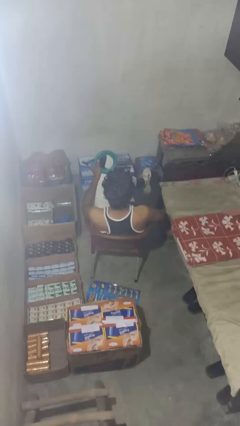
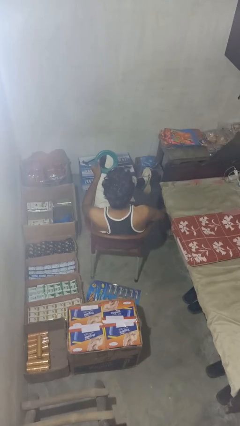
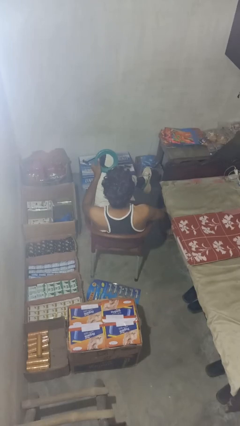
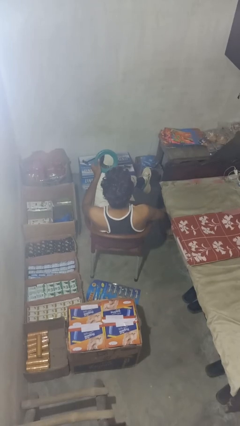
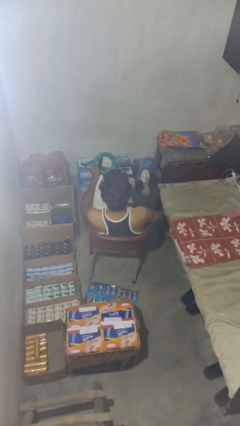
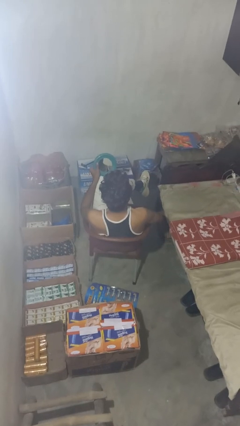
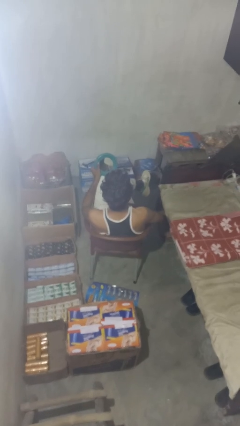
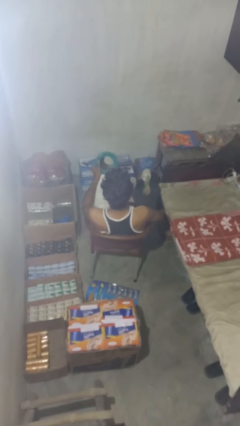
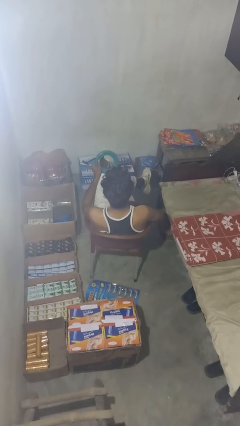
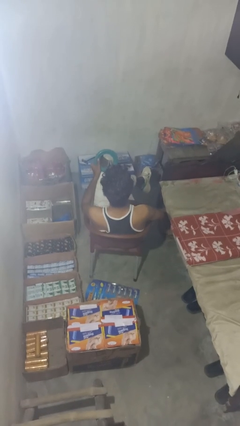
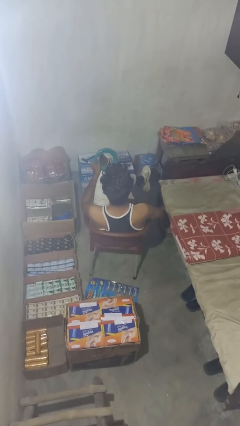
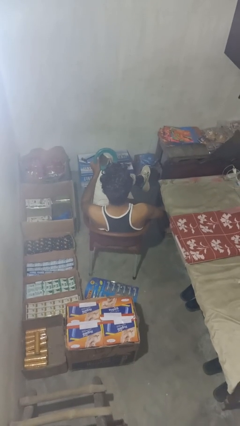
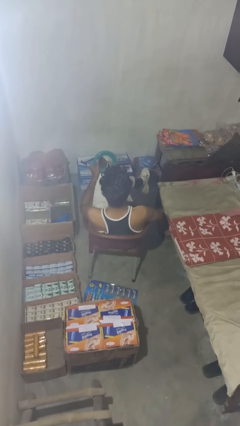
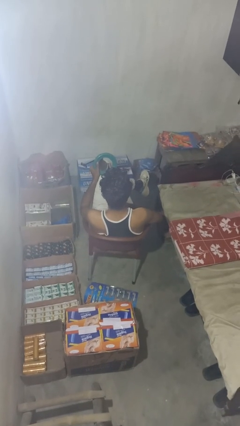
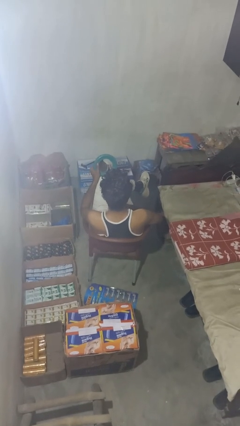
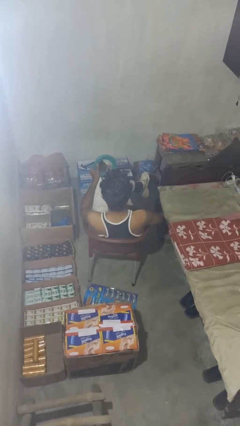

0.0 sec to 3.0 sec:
person applies shaving cream

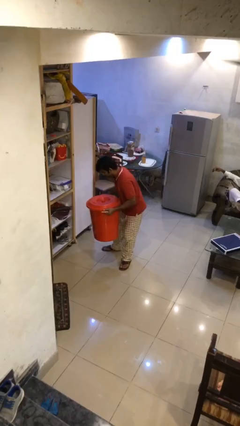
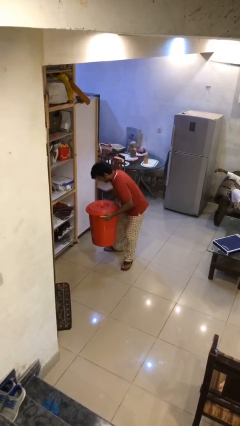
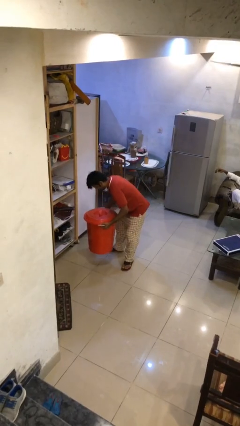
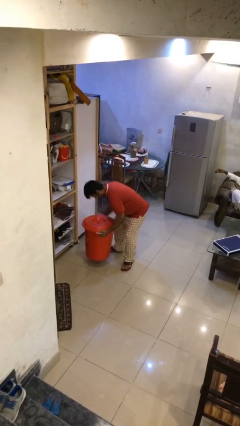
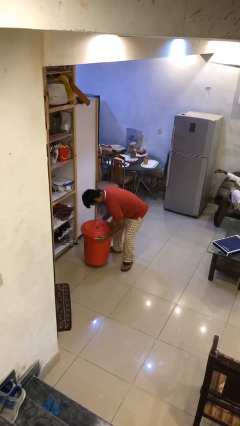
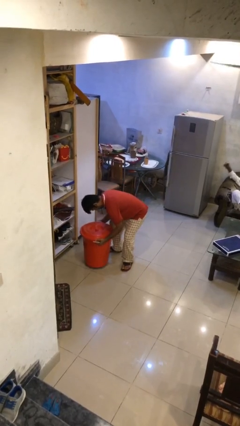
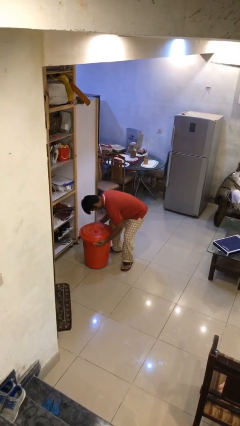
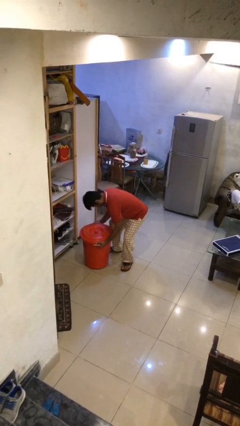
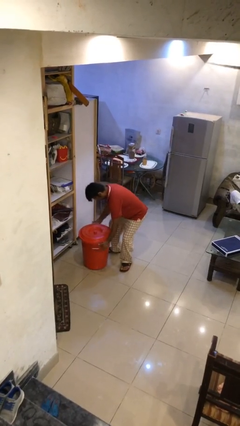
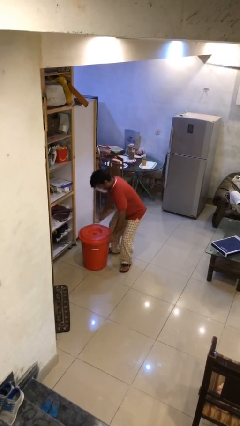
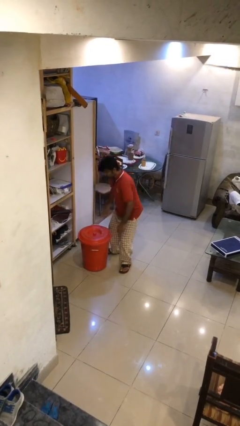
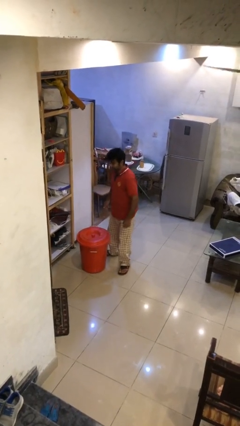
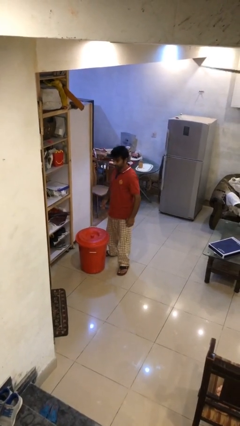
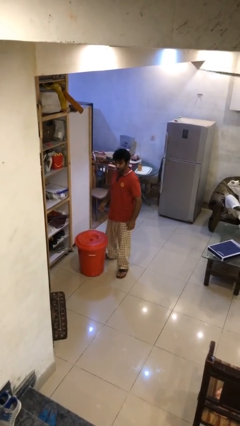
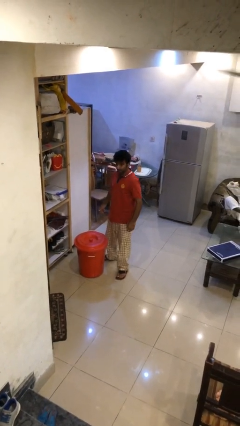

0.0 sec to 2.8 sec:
person puts down object on floor

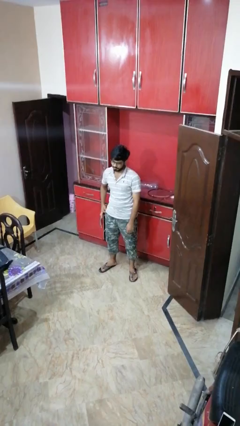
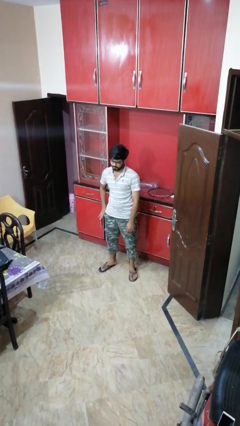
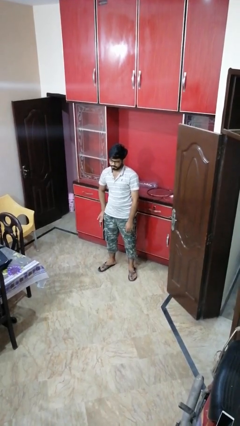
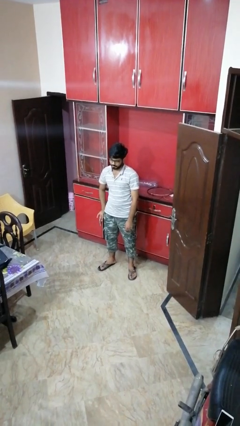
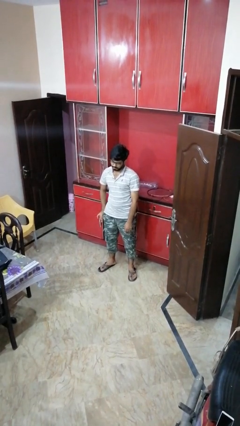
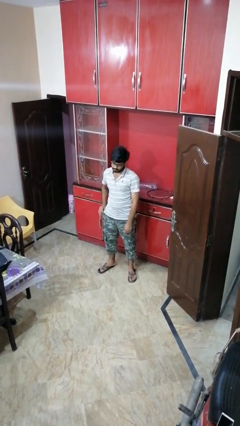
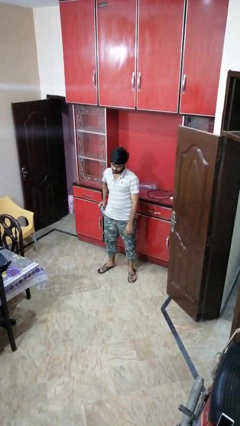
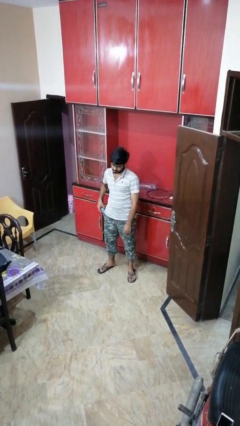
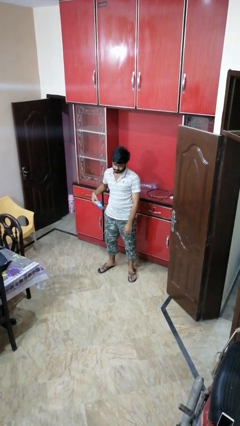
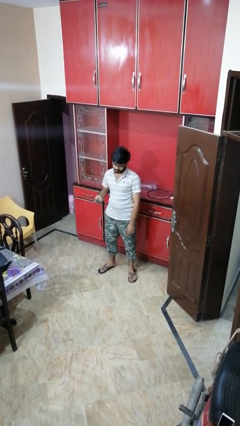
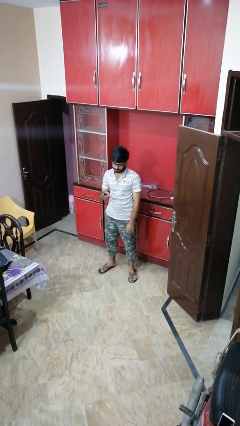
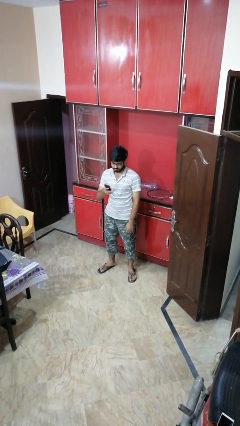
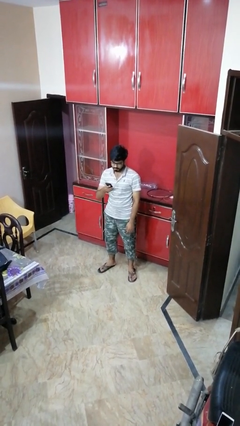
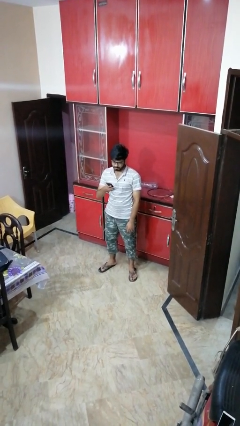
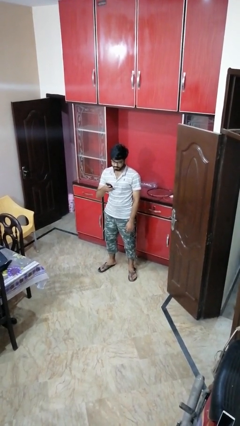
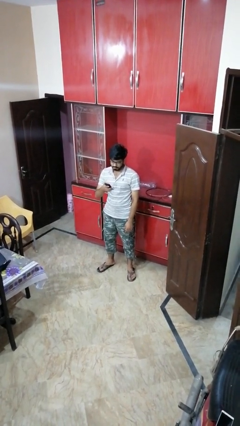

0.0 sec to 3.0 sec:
person takes phone from pocket

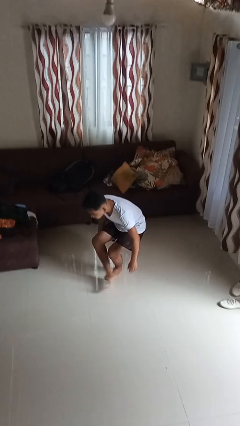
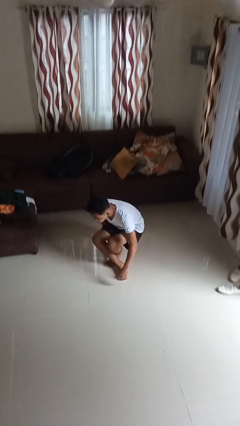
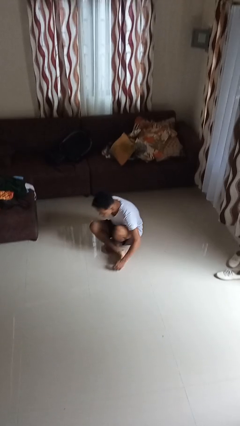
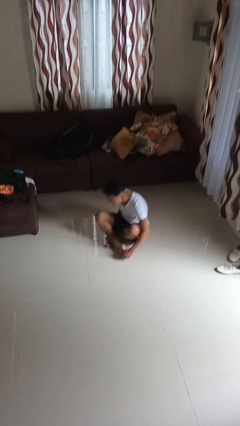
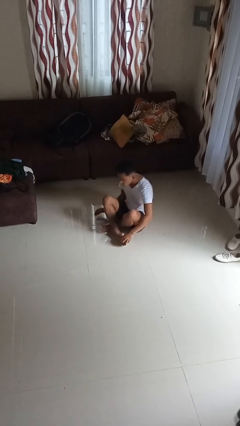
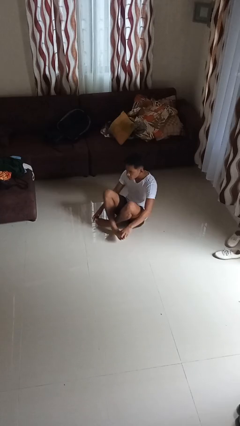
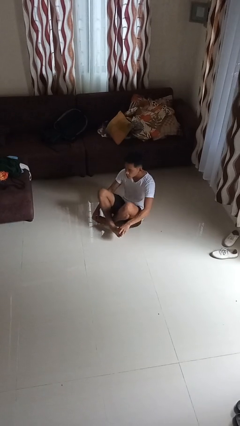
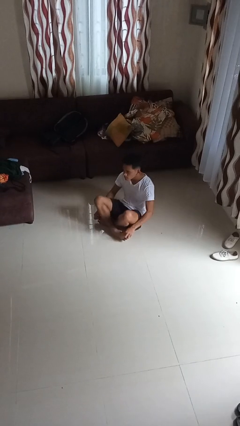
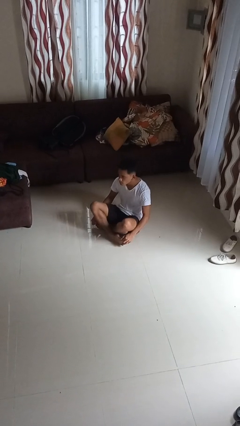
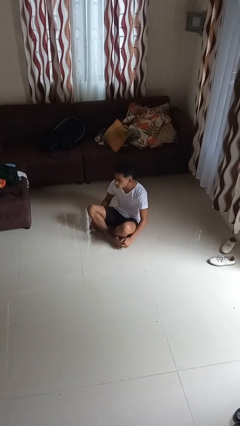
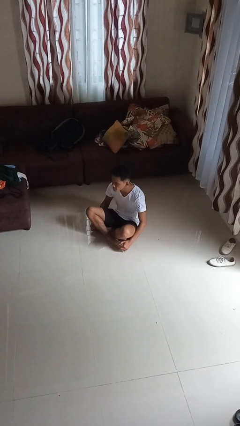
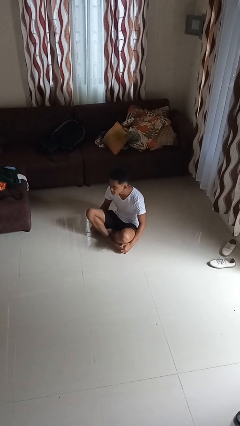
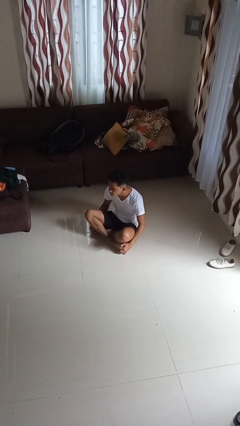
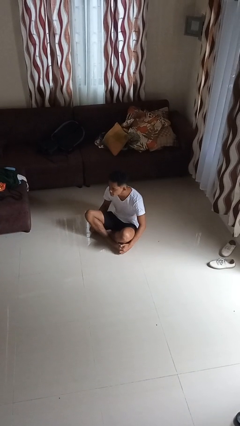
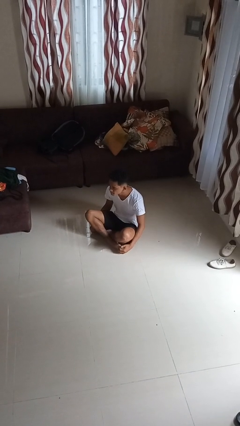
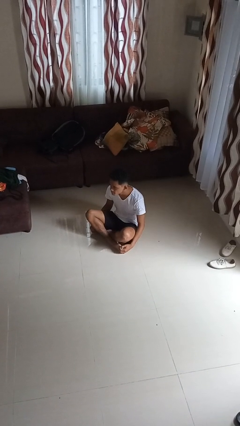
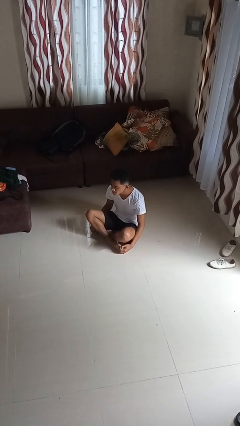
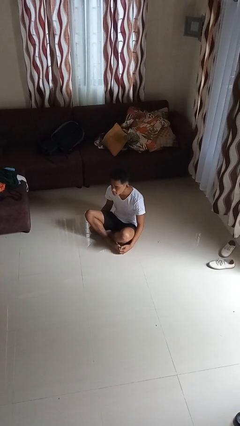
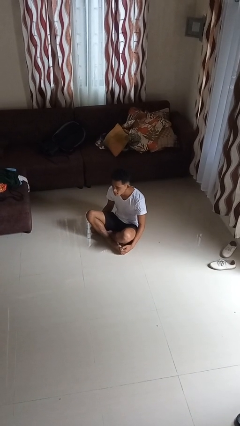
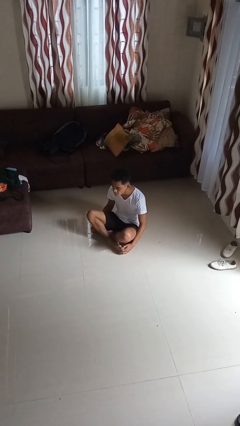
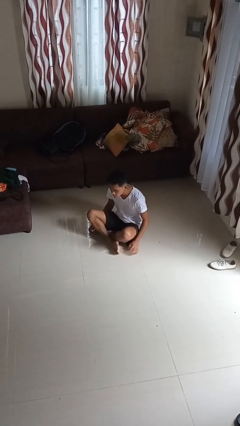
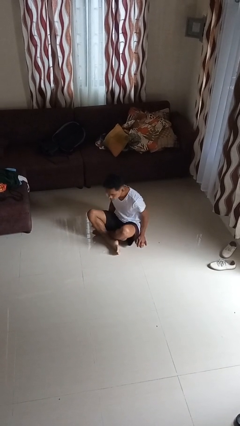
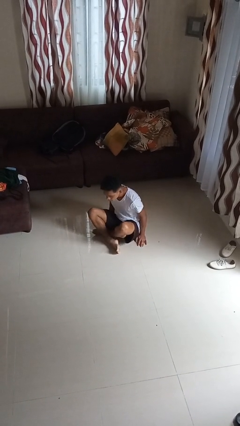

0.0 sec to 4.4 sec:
person sits crisscross

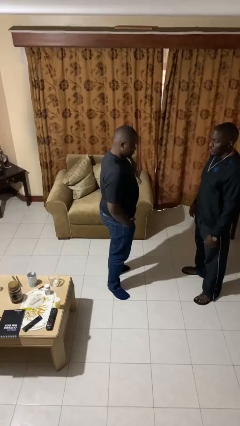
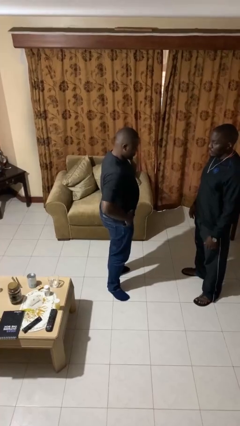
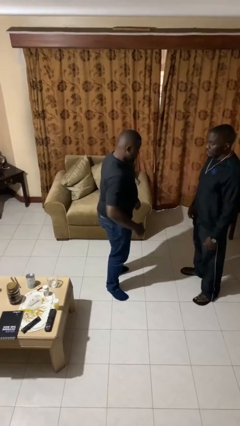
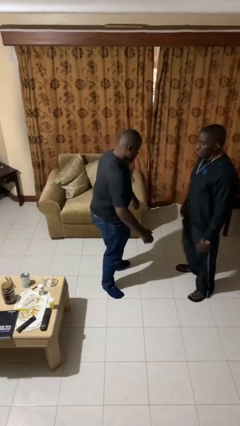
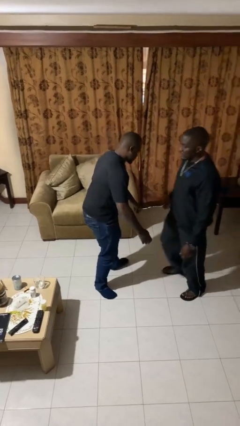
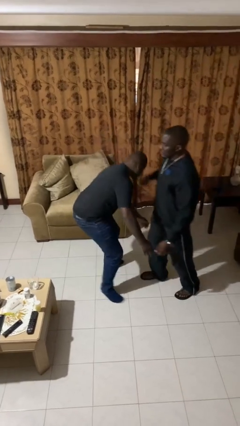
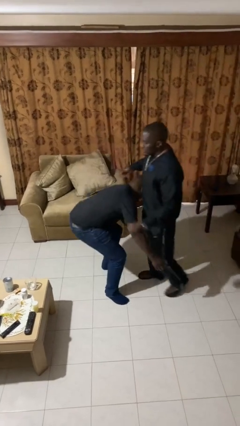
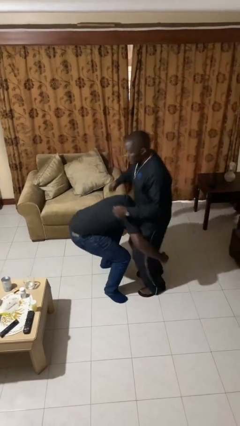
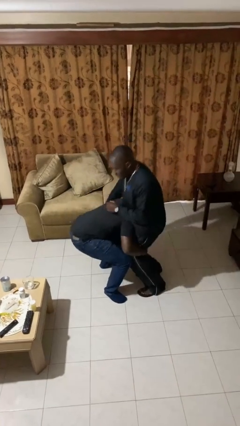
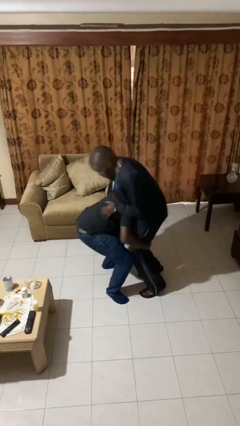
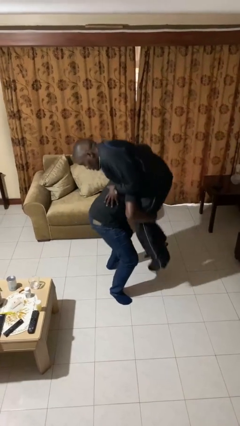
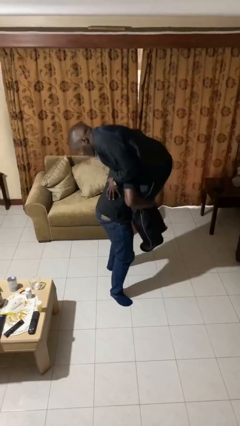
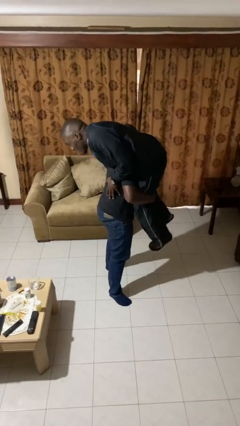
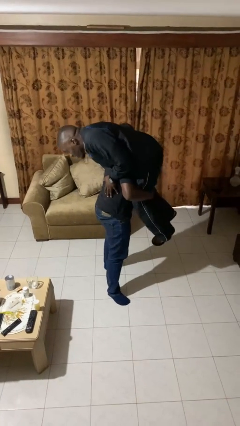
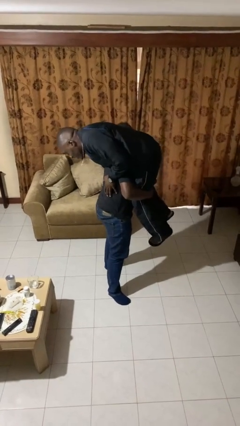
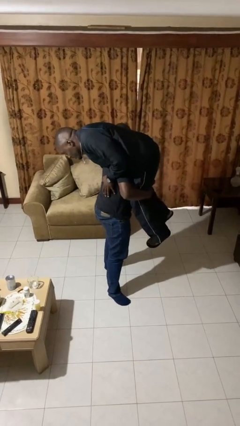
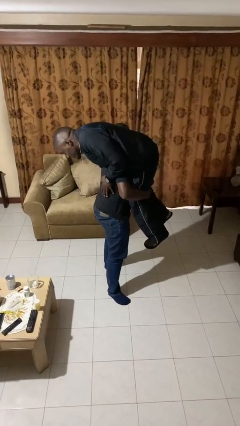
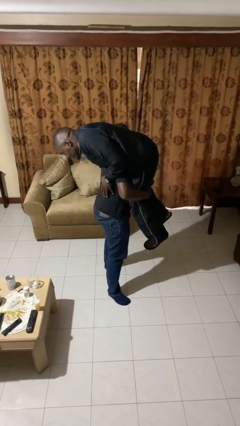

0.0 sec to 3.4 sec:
person carries person over shoulder

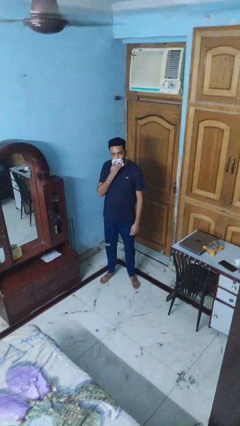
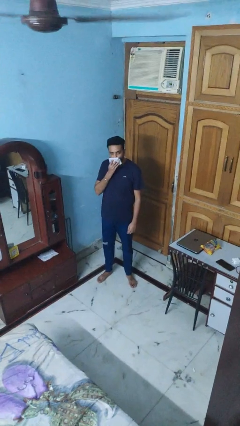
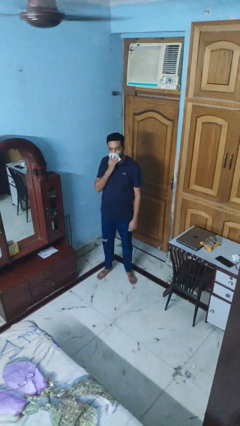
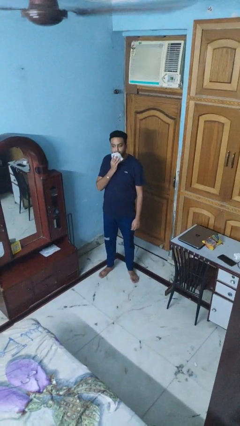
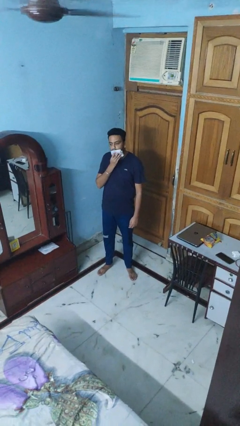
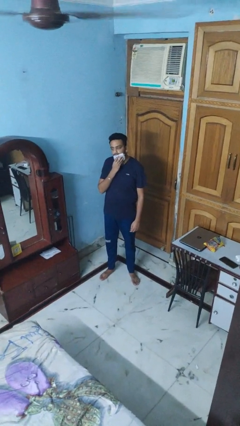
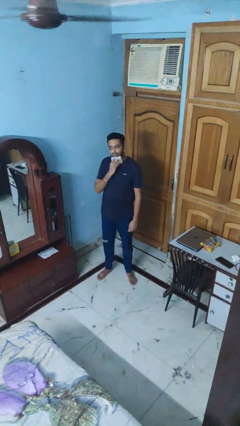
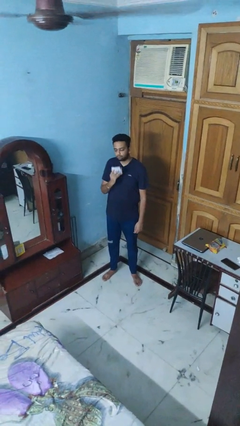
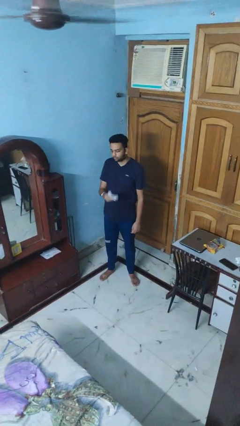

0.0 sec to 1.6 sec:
person wipes mouth with napkin
